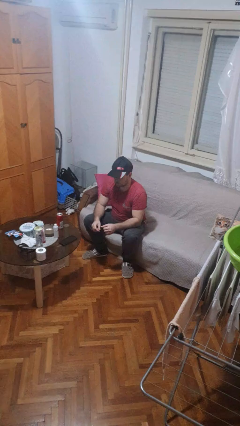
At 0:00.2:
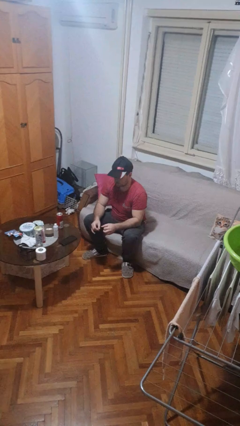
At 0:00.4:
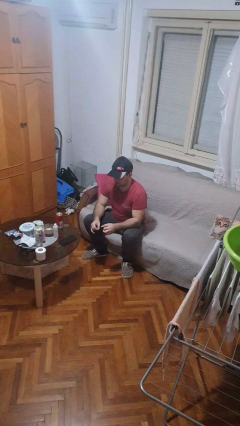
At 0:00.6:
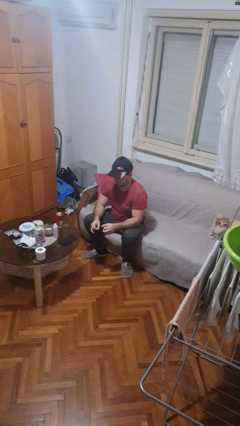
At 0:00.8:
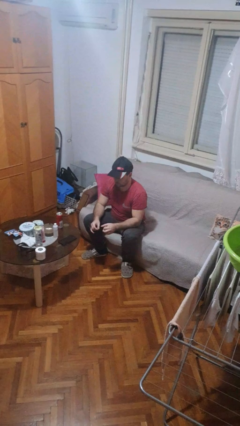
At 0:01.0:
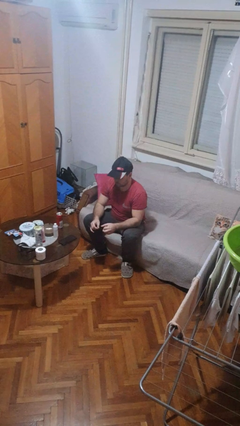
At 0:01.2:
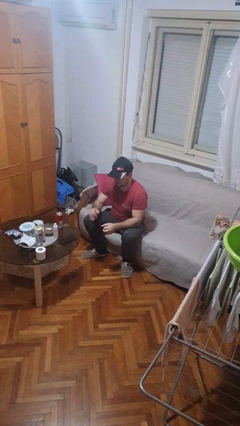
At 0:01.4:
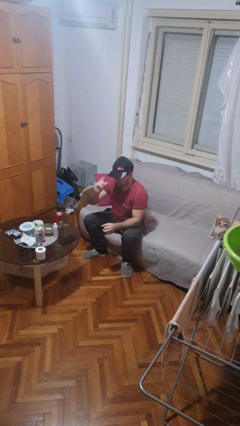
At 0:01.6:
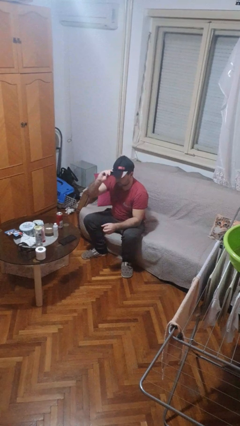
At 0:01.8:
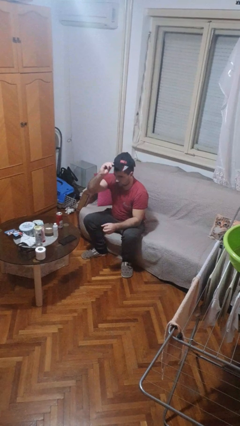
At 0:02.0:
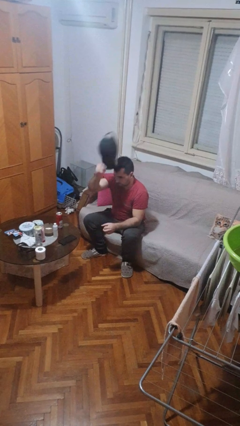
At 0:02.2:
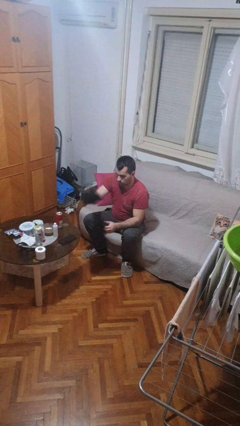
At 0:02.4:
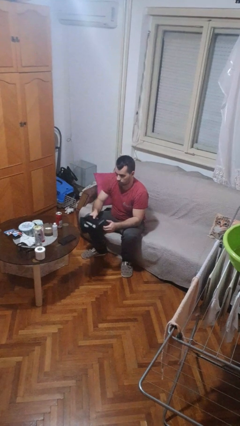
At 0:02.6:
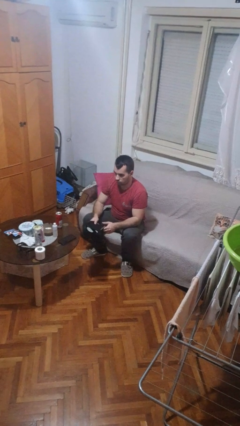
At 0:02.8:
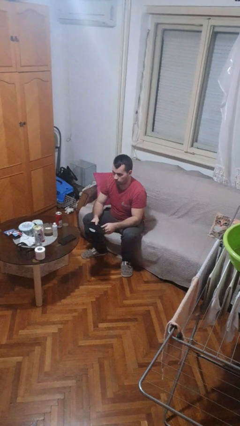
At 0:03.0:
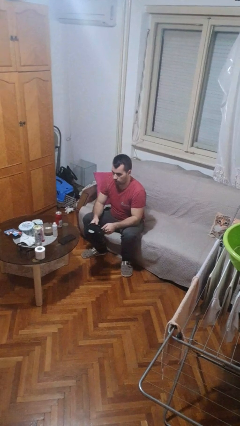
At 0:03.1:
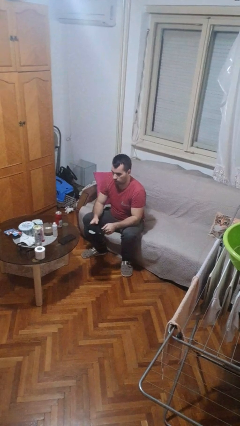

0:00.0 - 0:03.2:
person takes off hat

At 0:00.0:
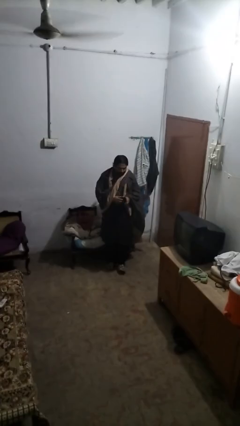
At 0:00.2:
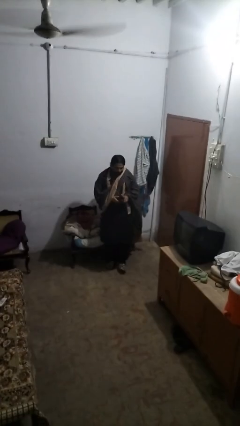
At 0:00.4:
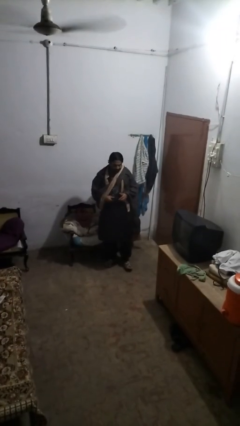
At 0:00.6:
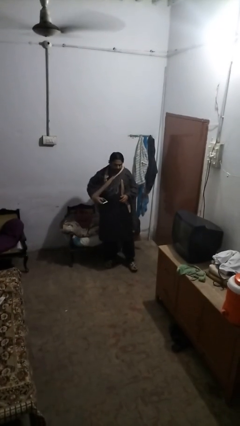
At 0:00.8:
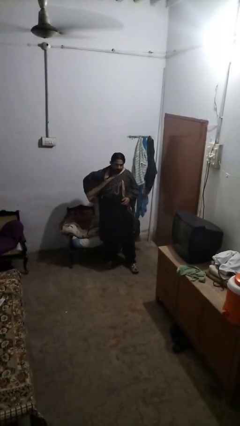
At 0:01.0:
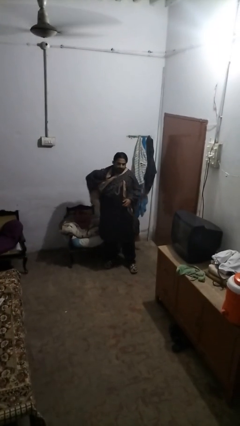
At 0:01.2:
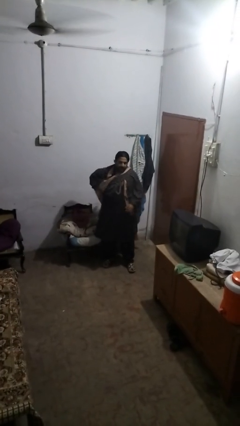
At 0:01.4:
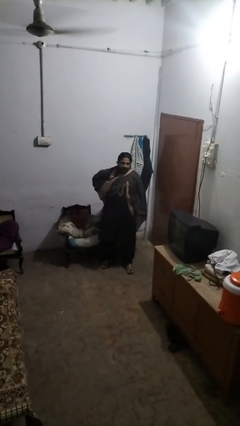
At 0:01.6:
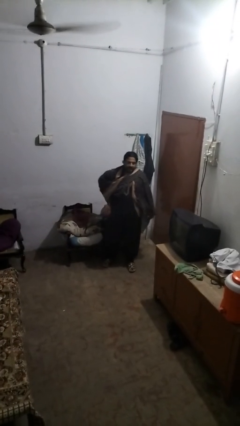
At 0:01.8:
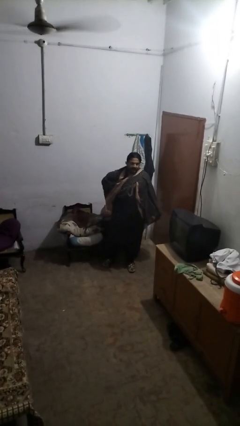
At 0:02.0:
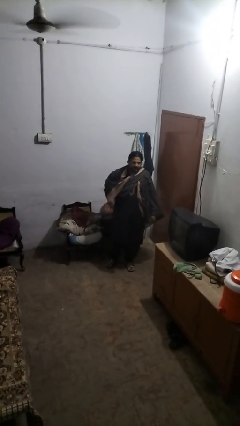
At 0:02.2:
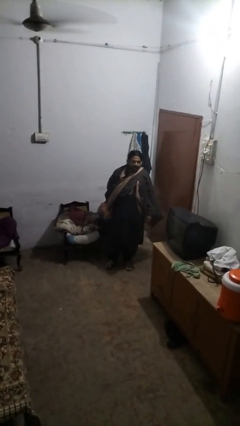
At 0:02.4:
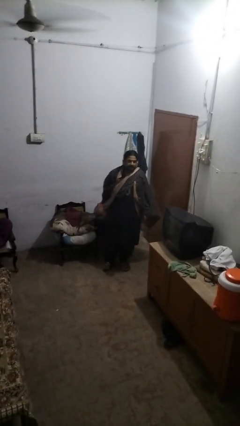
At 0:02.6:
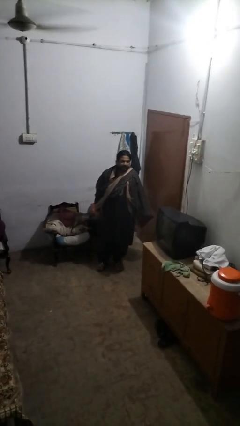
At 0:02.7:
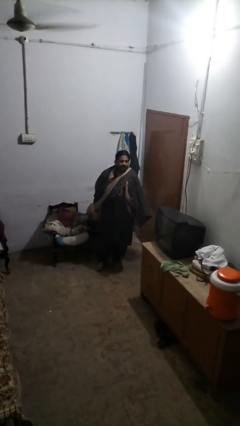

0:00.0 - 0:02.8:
person puts phone into pocket

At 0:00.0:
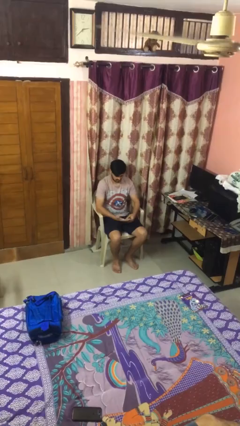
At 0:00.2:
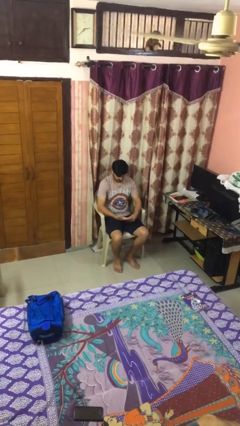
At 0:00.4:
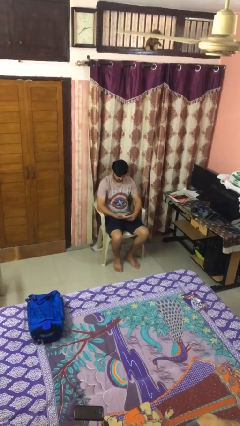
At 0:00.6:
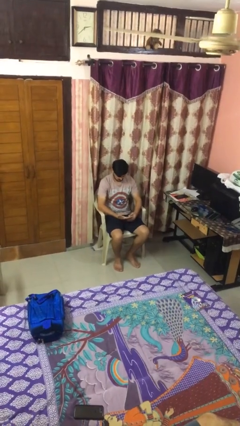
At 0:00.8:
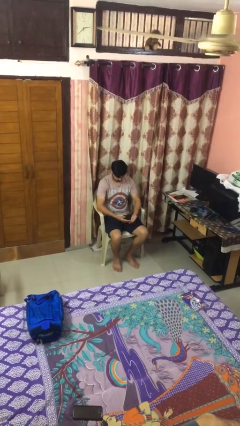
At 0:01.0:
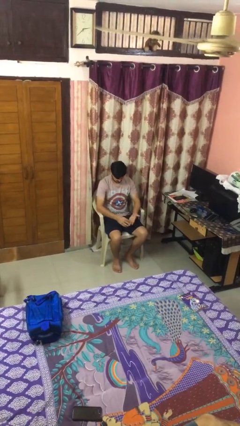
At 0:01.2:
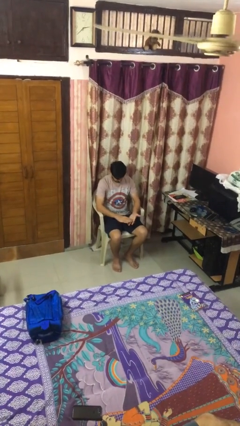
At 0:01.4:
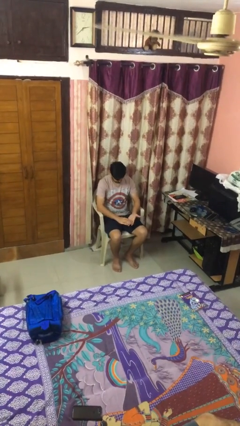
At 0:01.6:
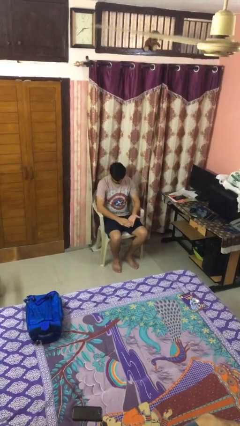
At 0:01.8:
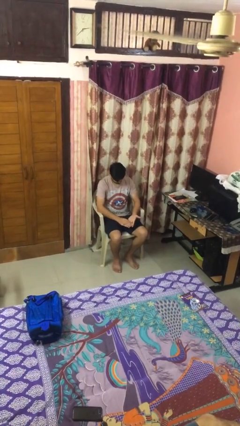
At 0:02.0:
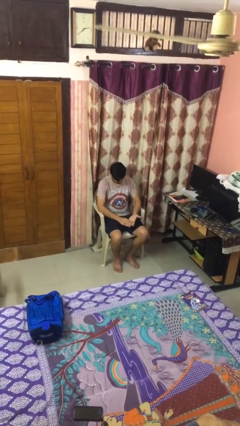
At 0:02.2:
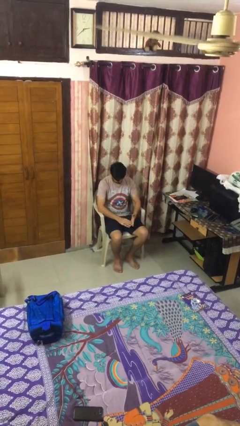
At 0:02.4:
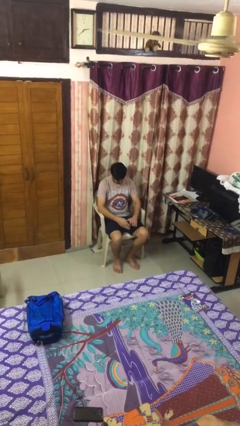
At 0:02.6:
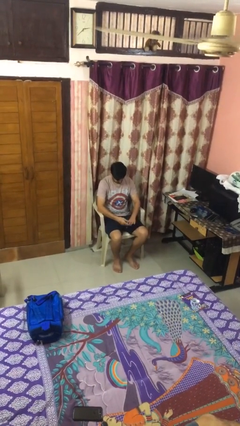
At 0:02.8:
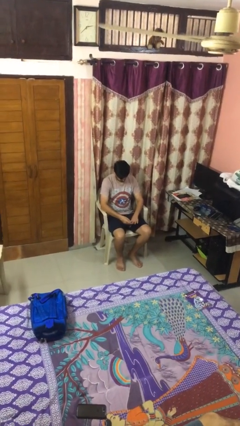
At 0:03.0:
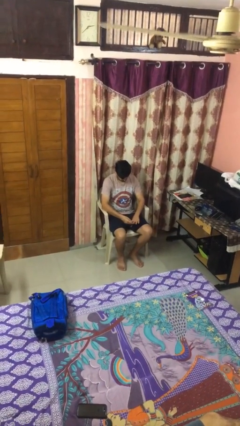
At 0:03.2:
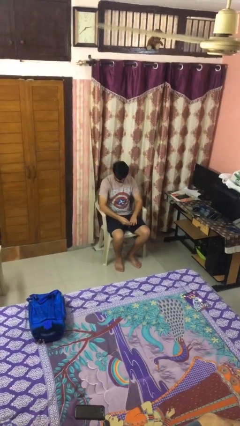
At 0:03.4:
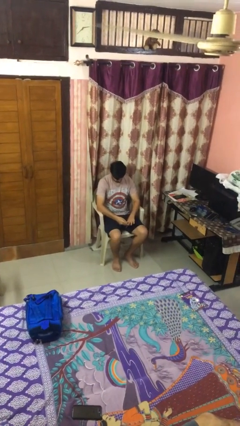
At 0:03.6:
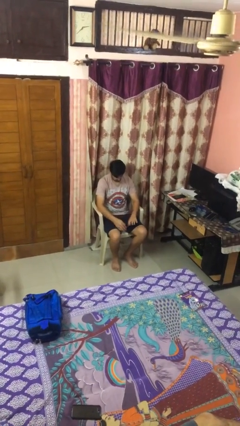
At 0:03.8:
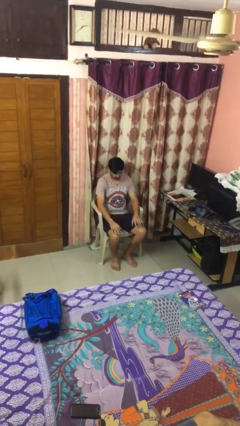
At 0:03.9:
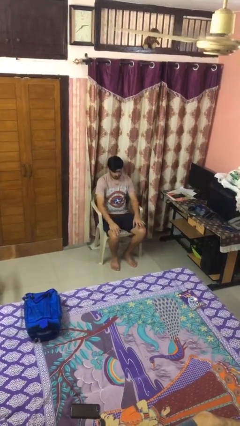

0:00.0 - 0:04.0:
person looks at hands in lap

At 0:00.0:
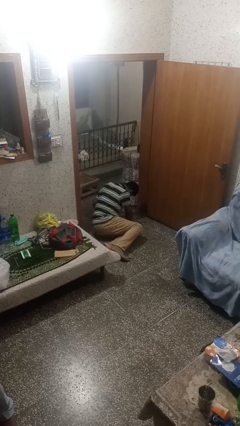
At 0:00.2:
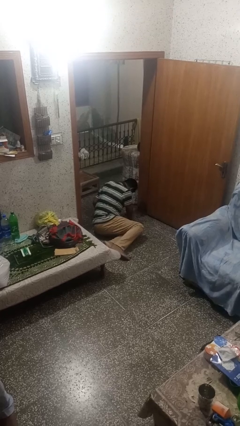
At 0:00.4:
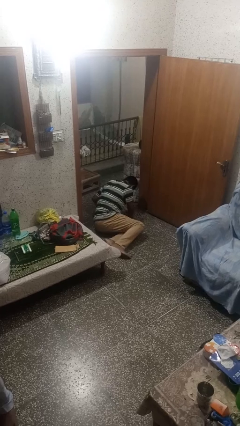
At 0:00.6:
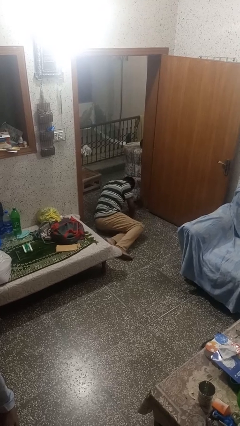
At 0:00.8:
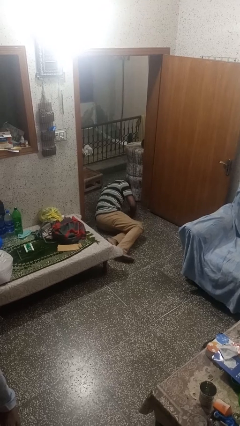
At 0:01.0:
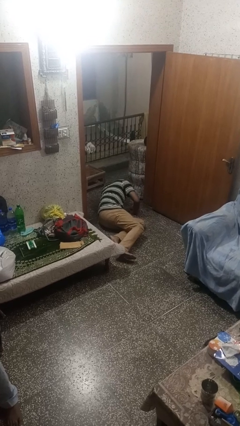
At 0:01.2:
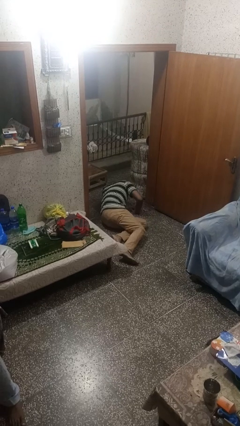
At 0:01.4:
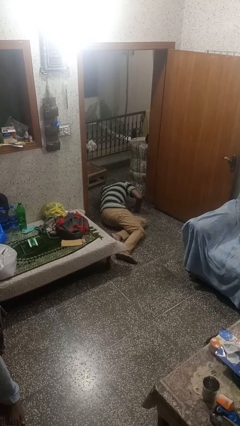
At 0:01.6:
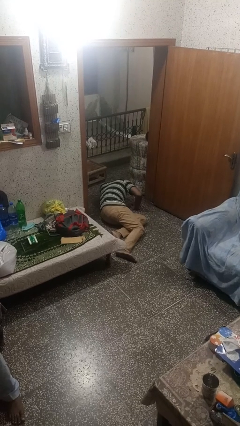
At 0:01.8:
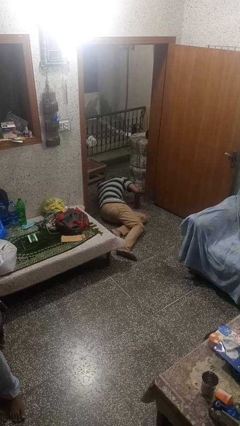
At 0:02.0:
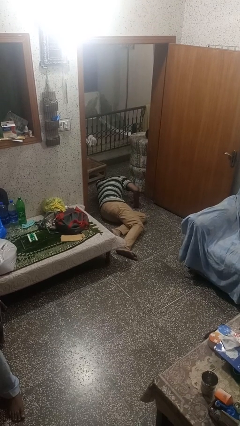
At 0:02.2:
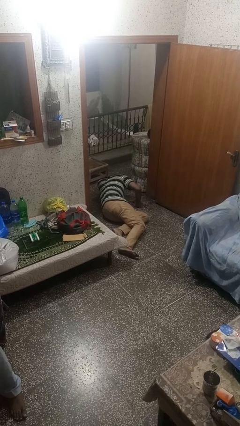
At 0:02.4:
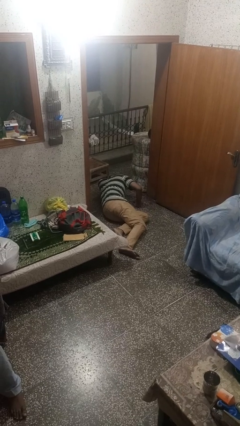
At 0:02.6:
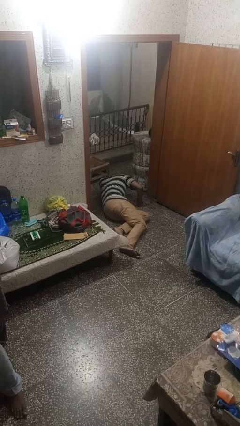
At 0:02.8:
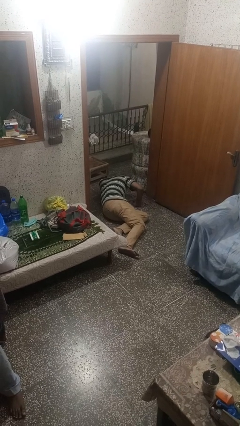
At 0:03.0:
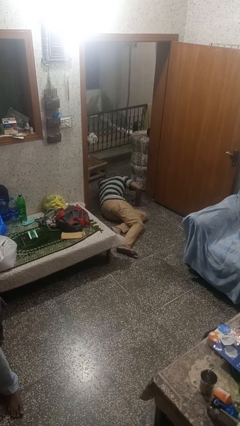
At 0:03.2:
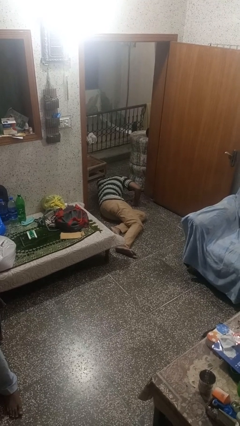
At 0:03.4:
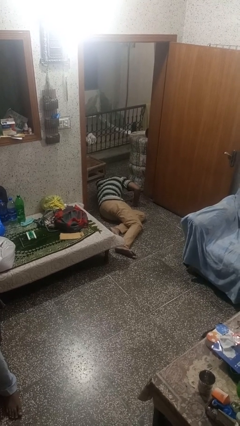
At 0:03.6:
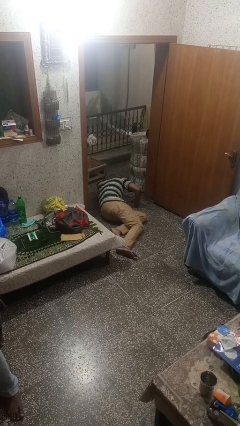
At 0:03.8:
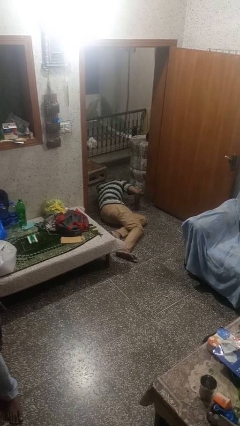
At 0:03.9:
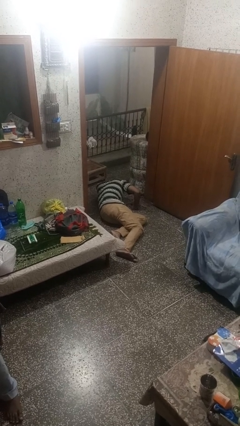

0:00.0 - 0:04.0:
person lies down on floor

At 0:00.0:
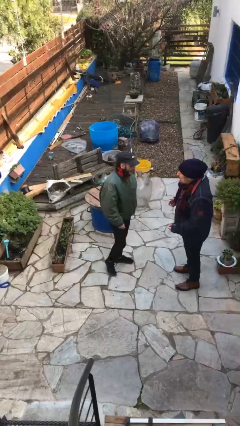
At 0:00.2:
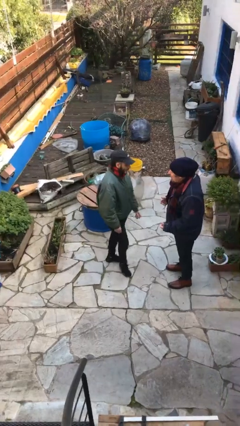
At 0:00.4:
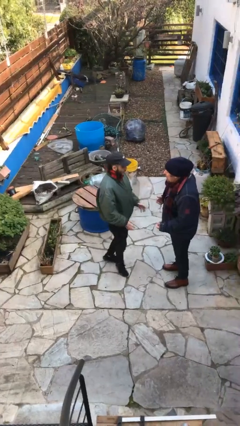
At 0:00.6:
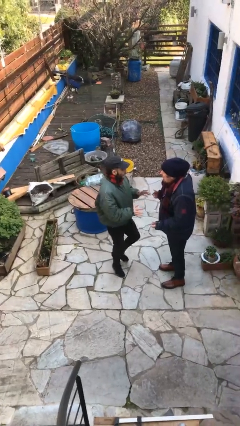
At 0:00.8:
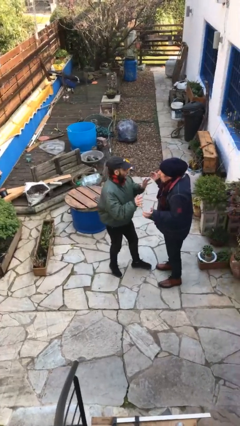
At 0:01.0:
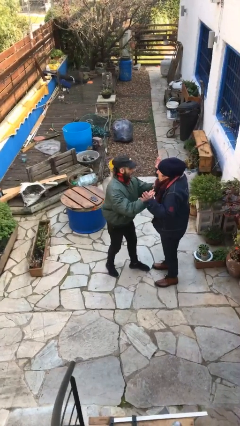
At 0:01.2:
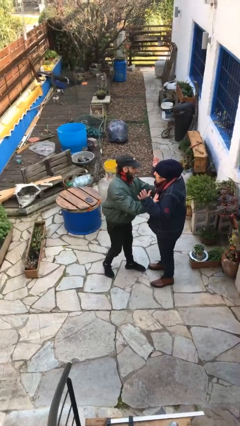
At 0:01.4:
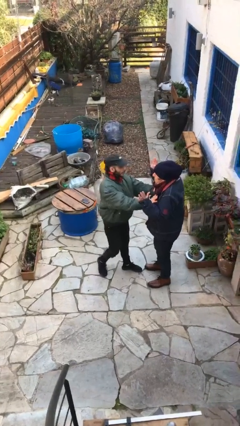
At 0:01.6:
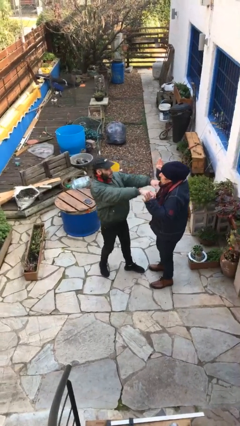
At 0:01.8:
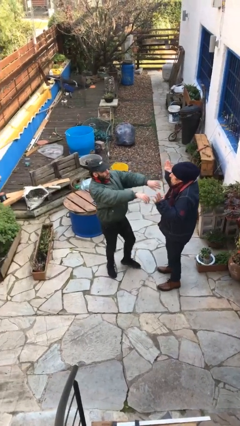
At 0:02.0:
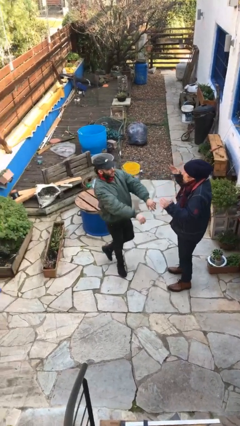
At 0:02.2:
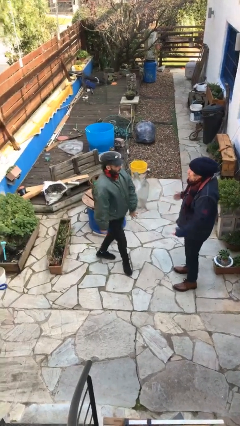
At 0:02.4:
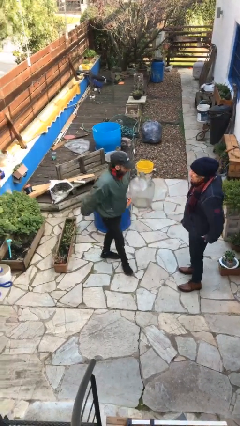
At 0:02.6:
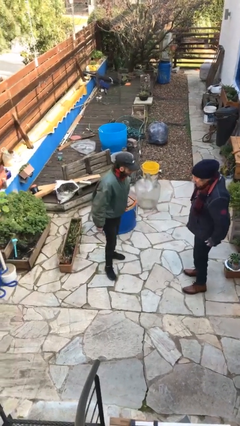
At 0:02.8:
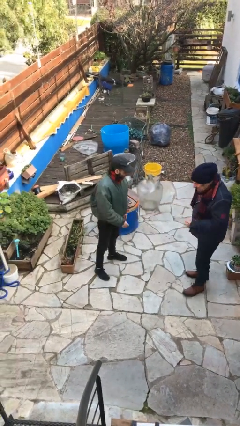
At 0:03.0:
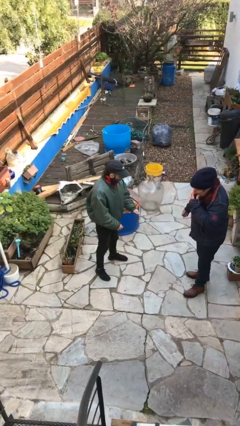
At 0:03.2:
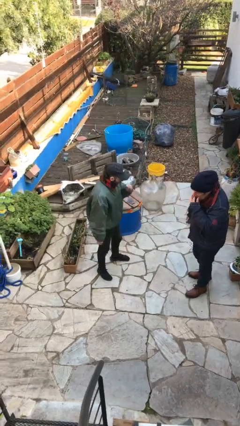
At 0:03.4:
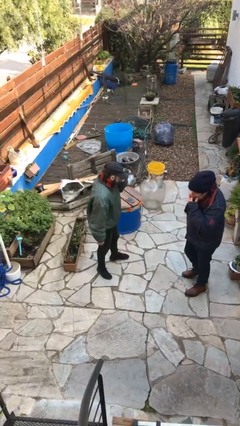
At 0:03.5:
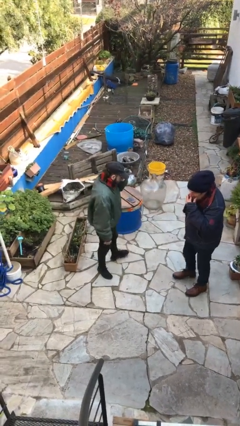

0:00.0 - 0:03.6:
person shoves person
